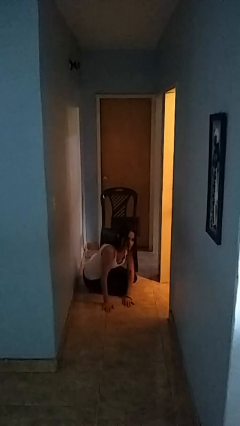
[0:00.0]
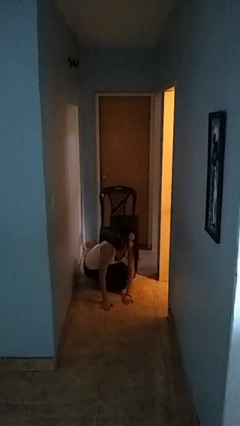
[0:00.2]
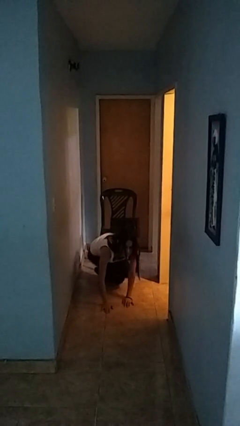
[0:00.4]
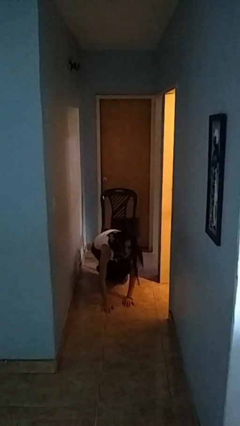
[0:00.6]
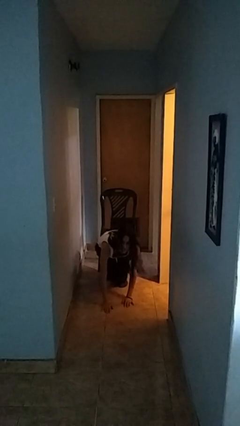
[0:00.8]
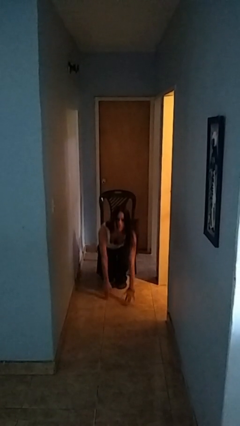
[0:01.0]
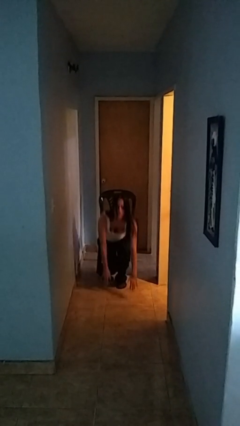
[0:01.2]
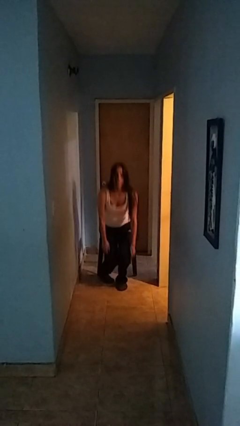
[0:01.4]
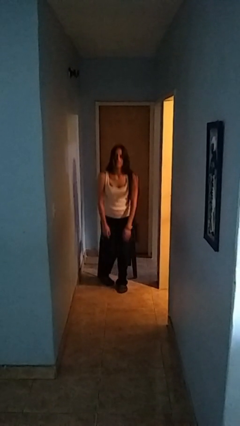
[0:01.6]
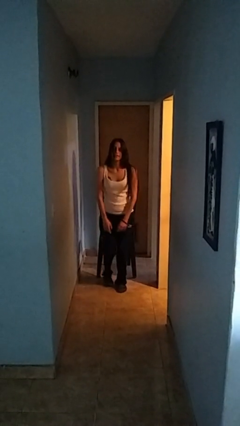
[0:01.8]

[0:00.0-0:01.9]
person falls from chair

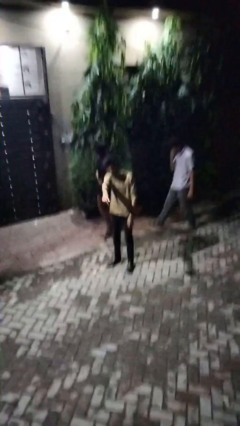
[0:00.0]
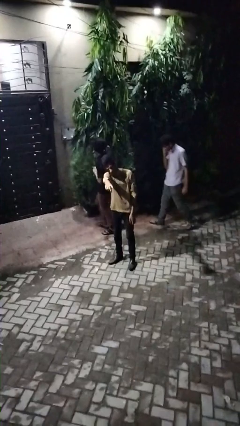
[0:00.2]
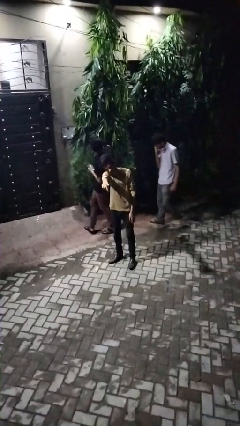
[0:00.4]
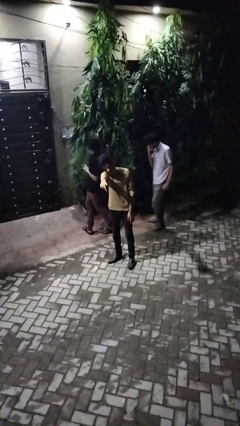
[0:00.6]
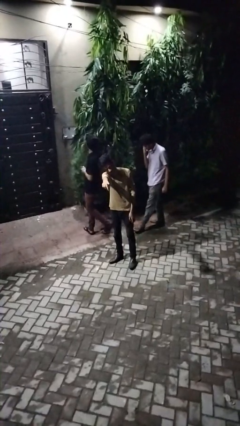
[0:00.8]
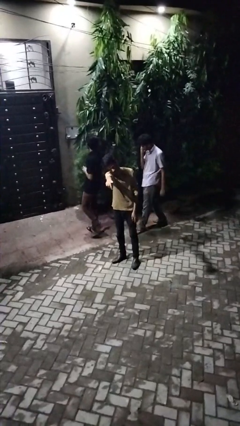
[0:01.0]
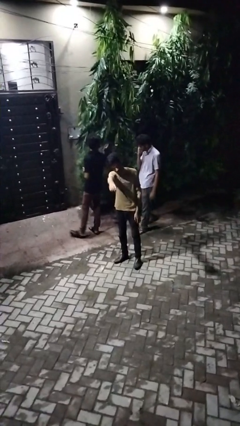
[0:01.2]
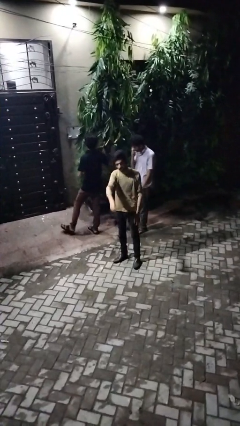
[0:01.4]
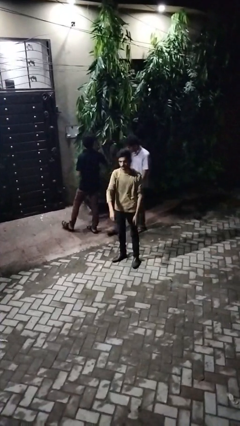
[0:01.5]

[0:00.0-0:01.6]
person points at person

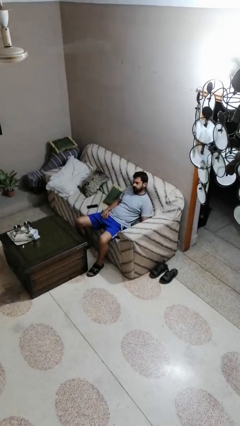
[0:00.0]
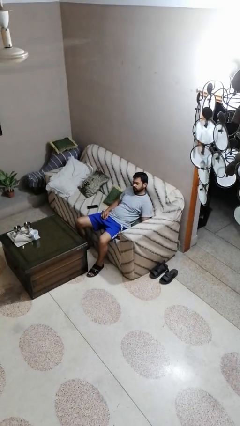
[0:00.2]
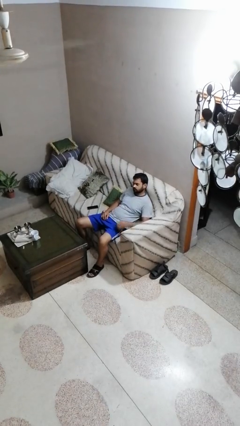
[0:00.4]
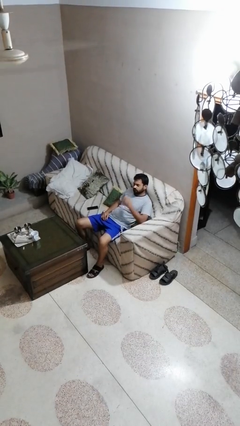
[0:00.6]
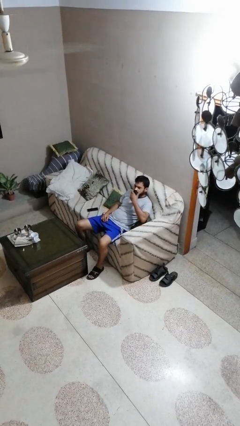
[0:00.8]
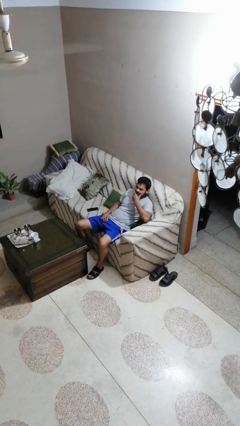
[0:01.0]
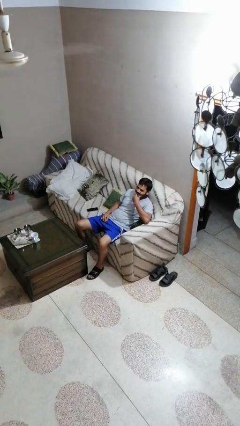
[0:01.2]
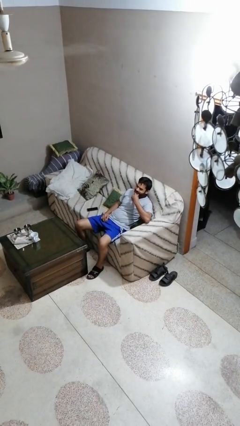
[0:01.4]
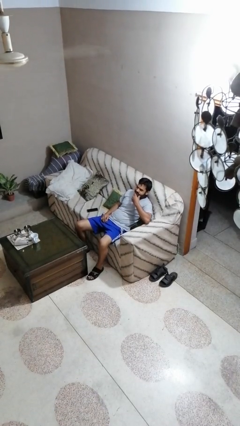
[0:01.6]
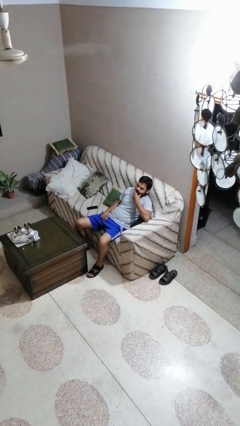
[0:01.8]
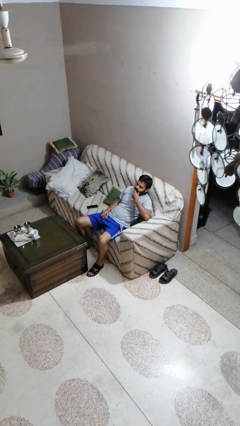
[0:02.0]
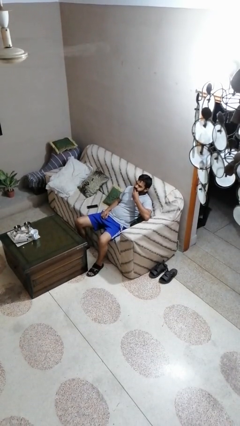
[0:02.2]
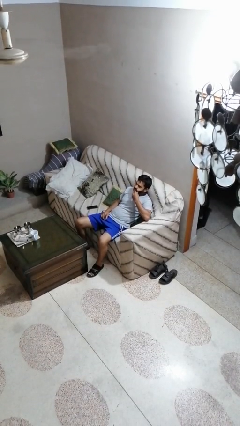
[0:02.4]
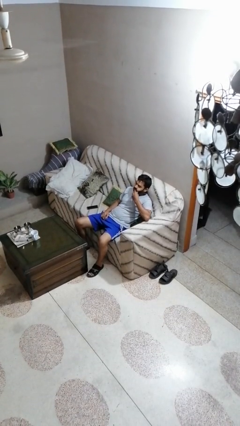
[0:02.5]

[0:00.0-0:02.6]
person strokes chin

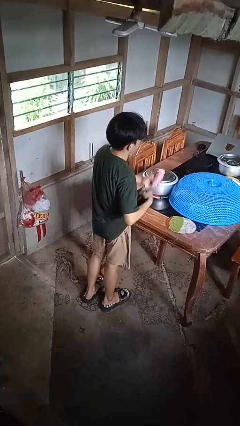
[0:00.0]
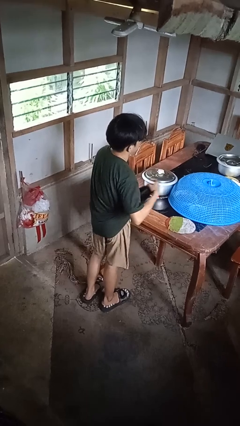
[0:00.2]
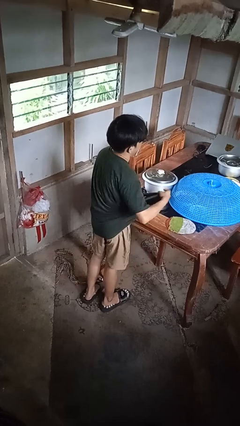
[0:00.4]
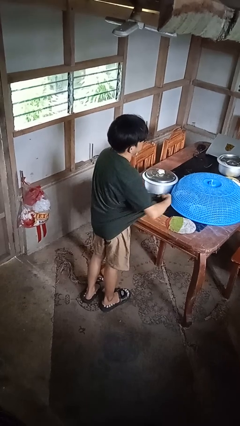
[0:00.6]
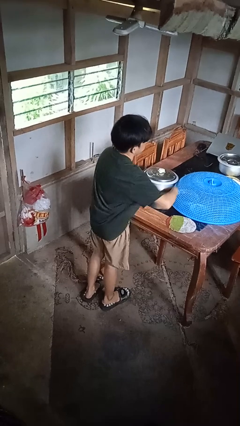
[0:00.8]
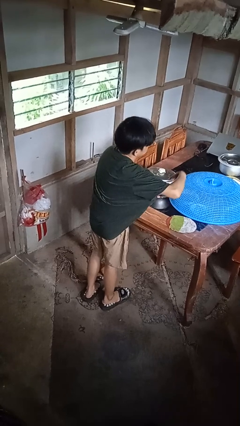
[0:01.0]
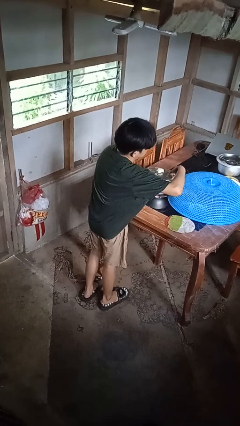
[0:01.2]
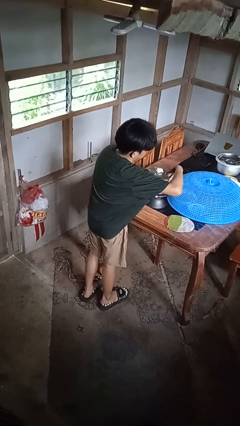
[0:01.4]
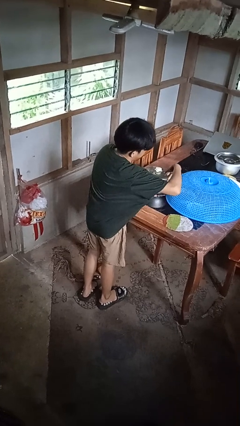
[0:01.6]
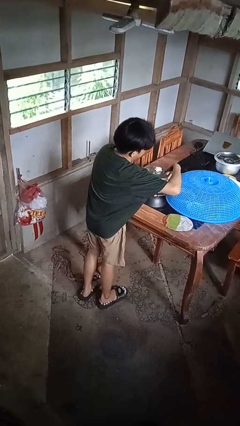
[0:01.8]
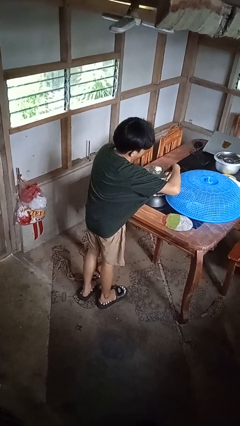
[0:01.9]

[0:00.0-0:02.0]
person applies deodorant

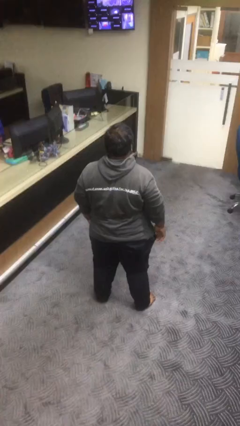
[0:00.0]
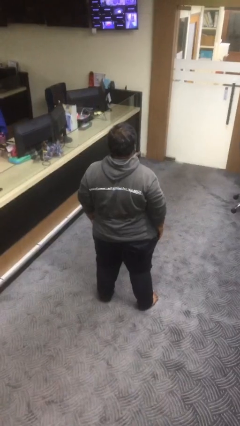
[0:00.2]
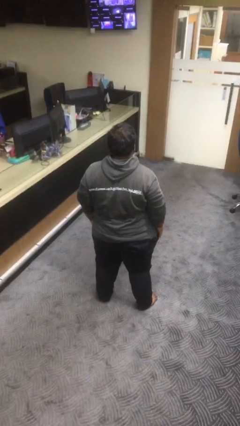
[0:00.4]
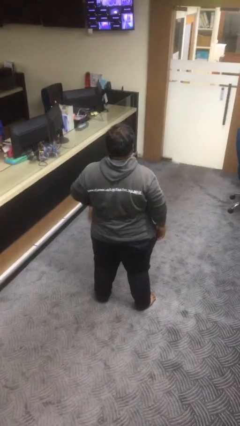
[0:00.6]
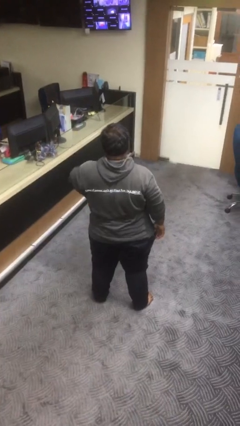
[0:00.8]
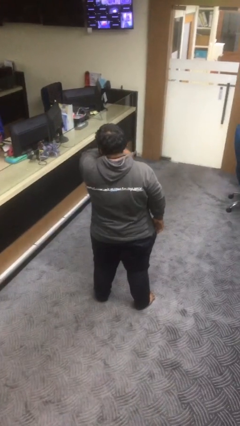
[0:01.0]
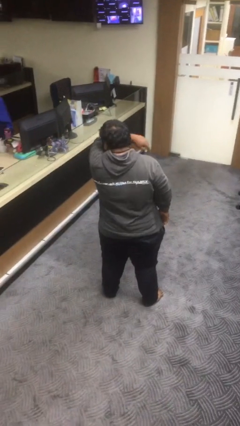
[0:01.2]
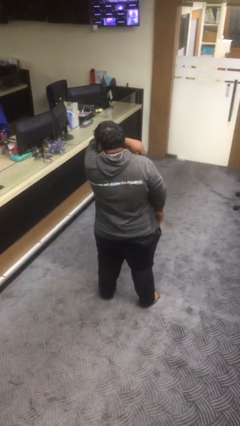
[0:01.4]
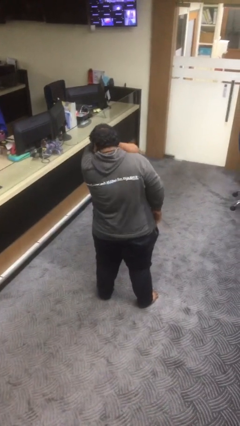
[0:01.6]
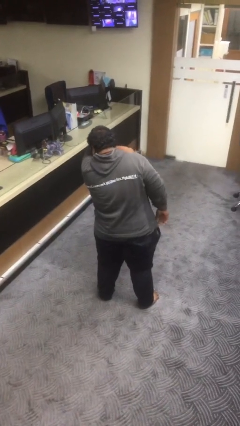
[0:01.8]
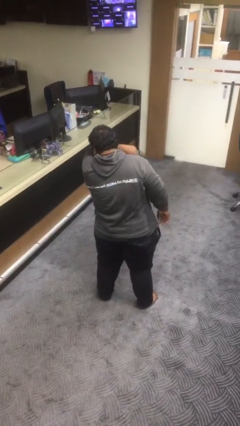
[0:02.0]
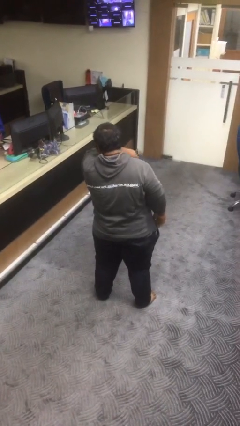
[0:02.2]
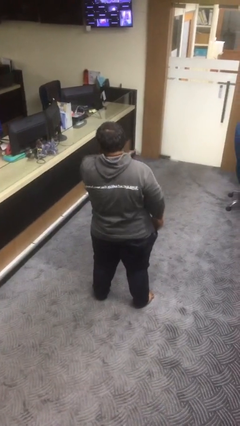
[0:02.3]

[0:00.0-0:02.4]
person sneezes into arm

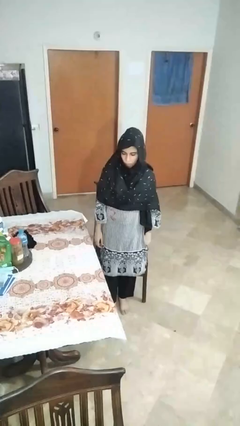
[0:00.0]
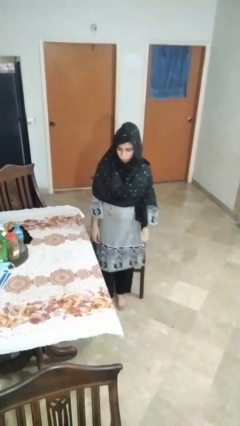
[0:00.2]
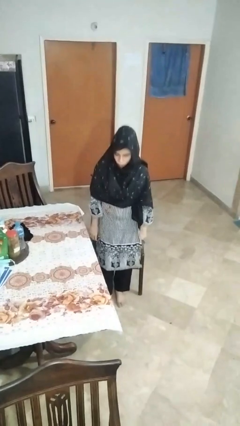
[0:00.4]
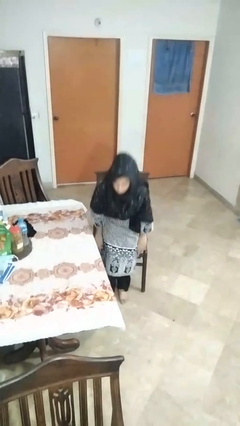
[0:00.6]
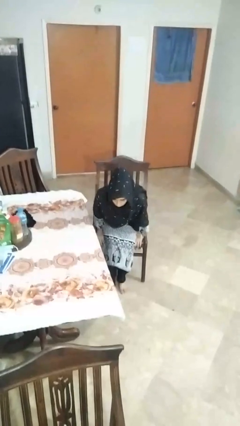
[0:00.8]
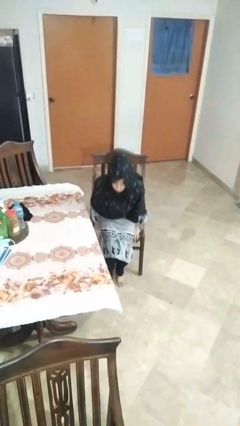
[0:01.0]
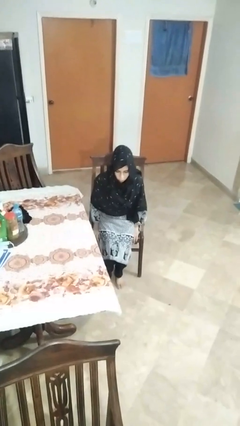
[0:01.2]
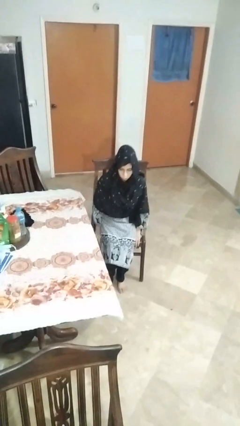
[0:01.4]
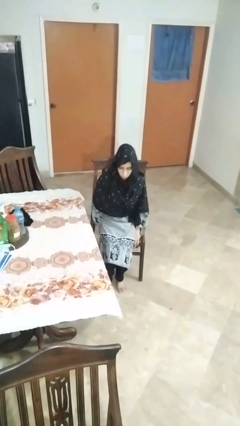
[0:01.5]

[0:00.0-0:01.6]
person sits down

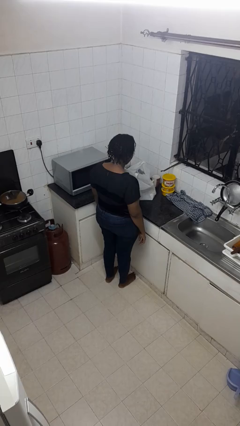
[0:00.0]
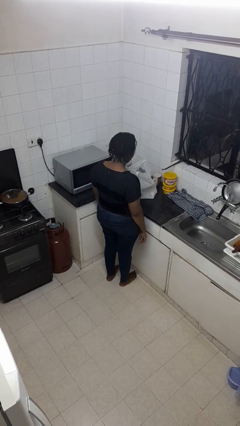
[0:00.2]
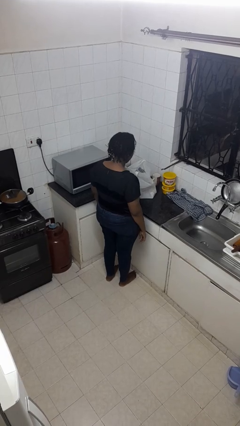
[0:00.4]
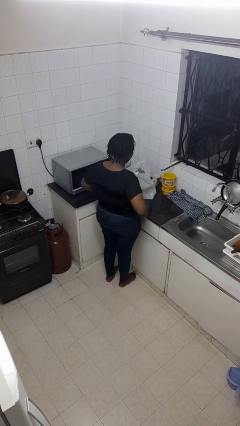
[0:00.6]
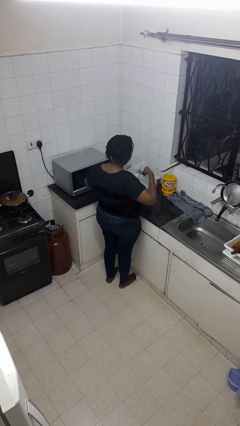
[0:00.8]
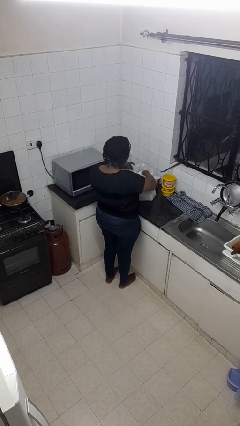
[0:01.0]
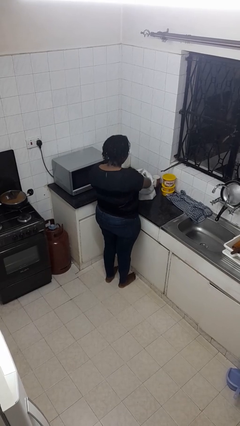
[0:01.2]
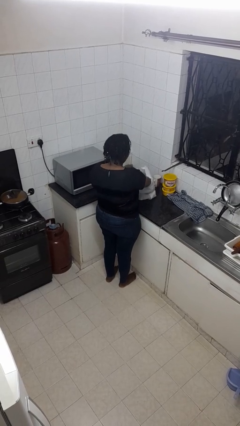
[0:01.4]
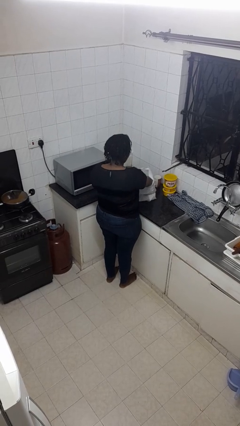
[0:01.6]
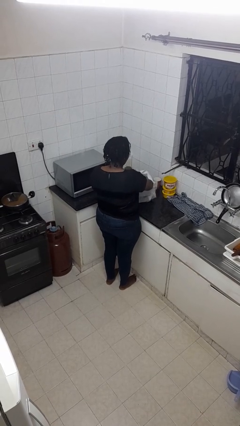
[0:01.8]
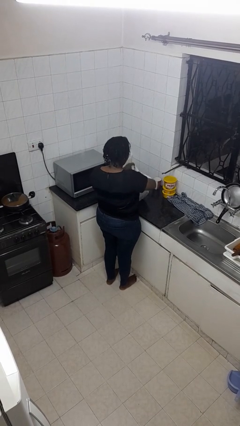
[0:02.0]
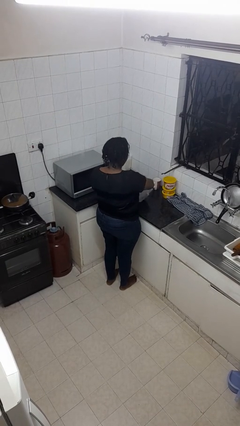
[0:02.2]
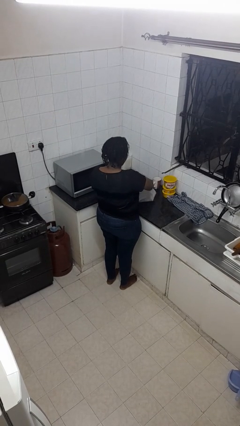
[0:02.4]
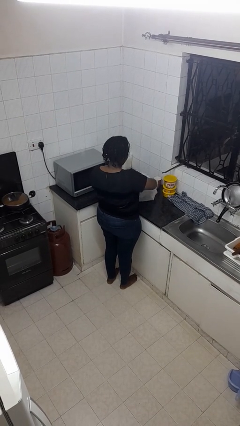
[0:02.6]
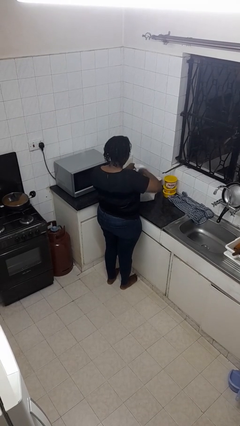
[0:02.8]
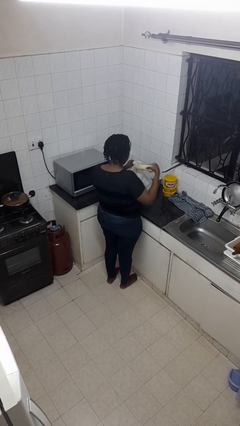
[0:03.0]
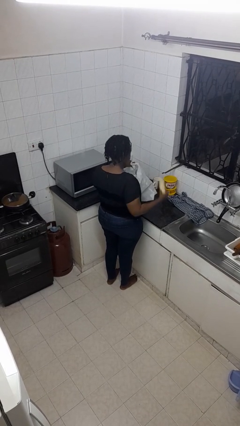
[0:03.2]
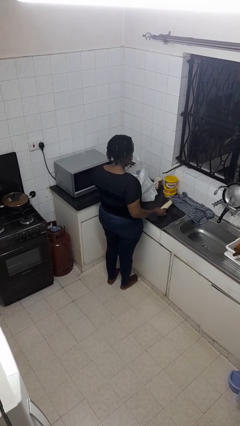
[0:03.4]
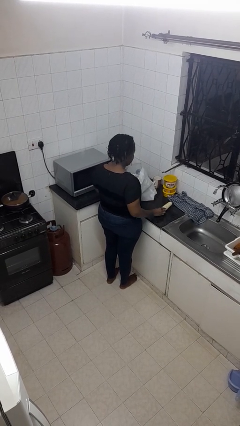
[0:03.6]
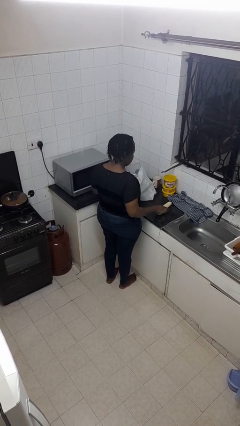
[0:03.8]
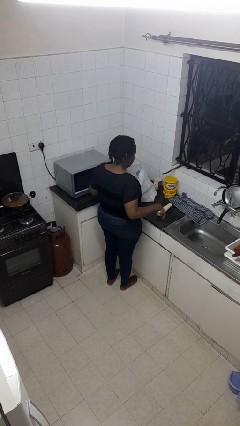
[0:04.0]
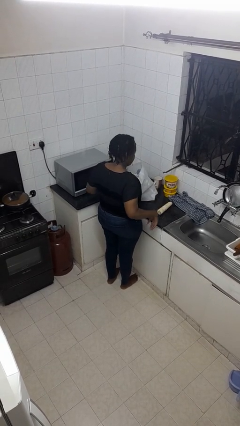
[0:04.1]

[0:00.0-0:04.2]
person takes object from bag

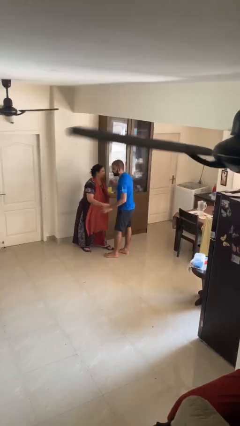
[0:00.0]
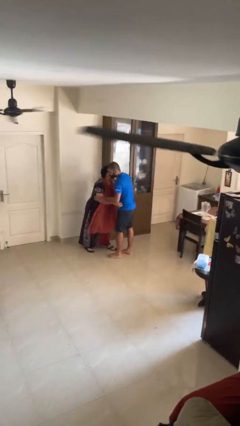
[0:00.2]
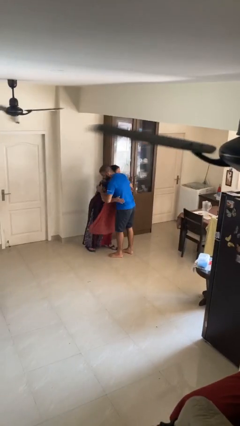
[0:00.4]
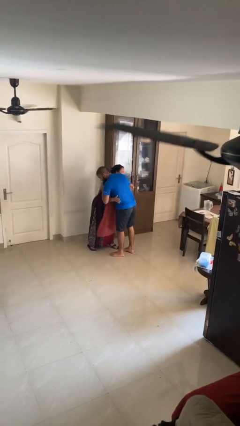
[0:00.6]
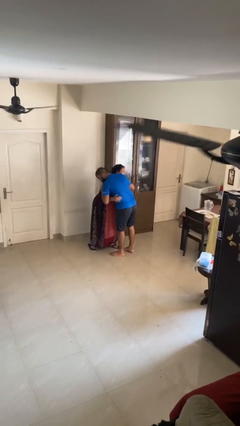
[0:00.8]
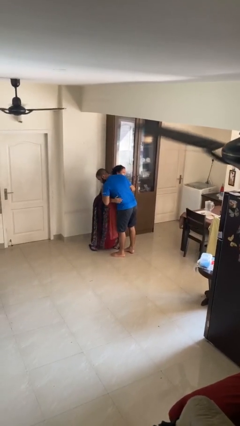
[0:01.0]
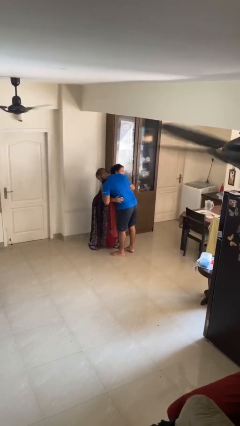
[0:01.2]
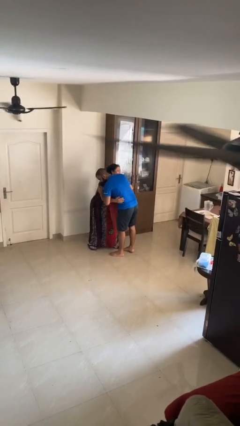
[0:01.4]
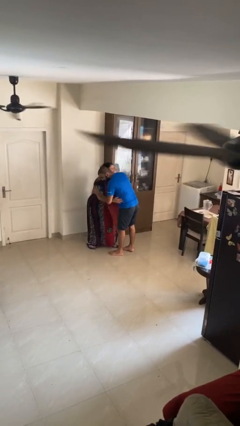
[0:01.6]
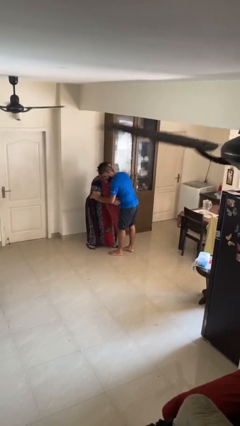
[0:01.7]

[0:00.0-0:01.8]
person embraces person
